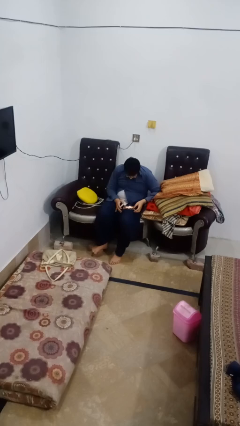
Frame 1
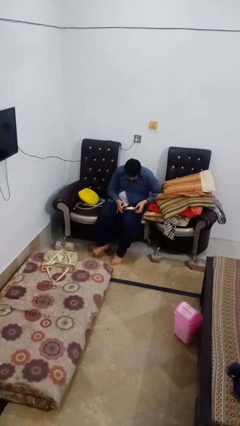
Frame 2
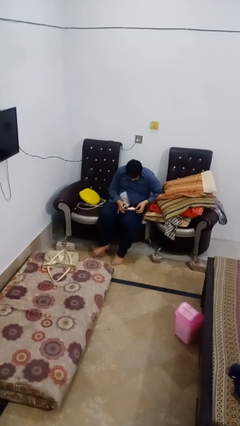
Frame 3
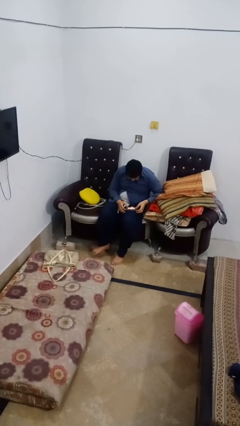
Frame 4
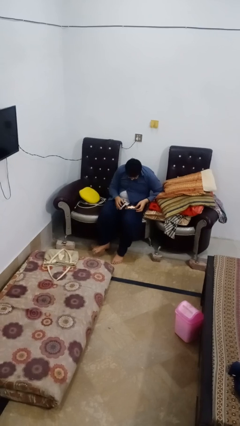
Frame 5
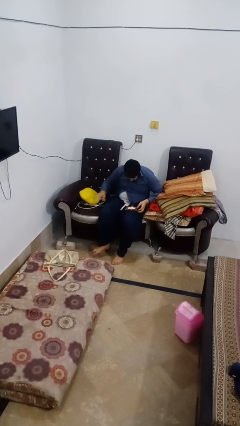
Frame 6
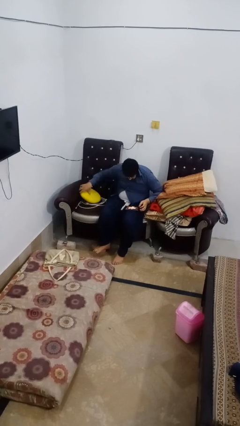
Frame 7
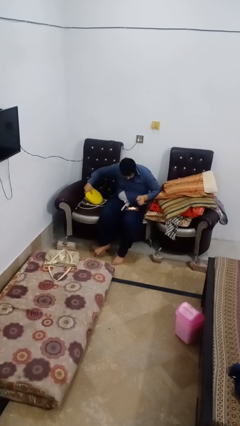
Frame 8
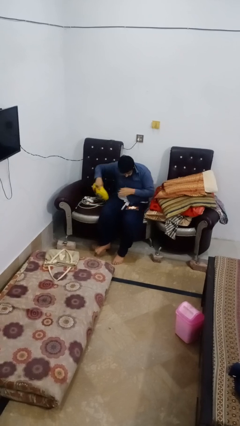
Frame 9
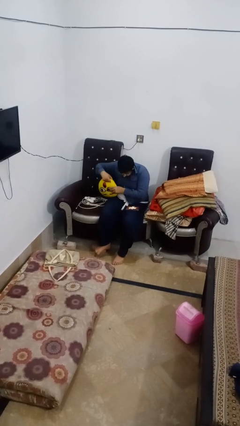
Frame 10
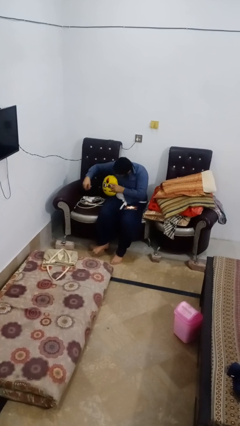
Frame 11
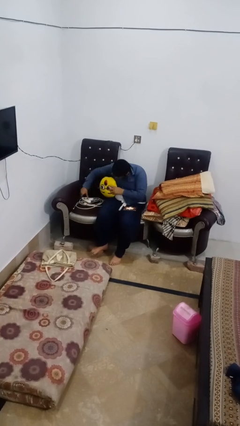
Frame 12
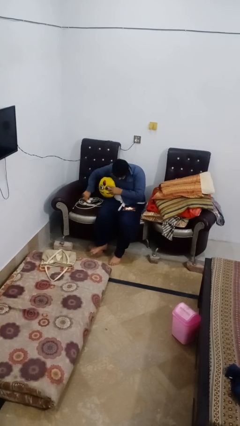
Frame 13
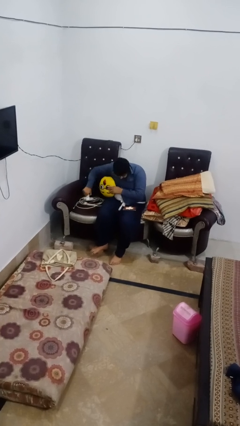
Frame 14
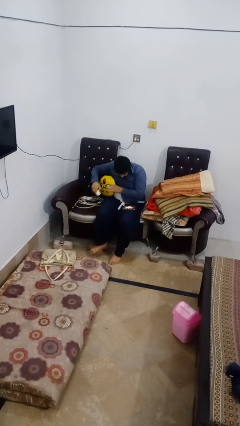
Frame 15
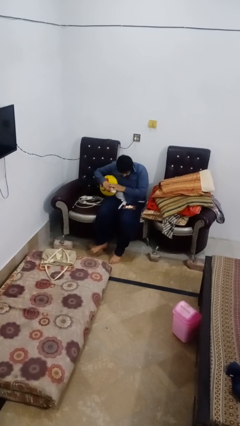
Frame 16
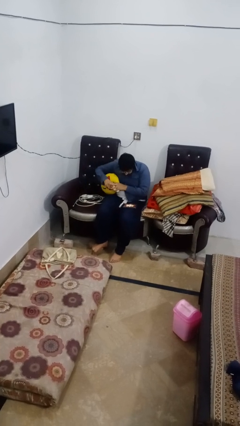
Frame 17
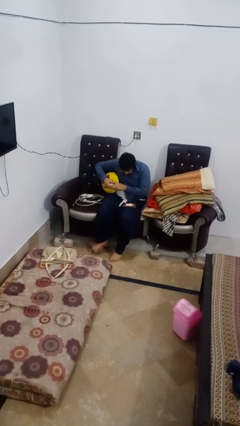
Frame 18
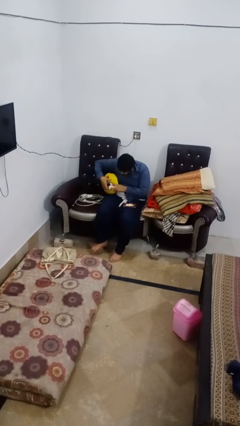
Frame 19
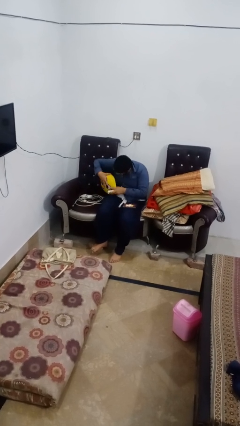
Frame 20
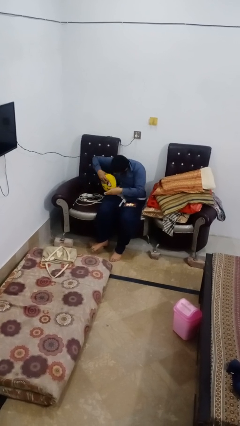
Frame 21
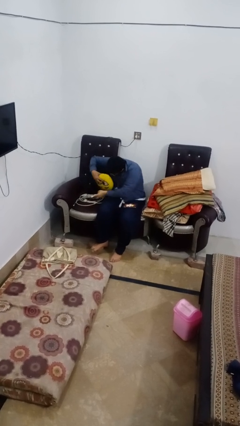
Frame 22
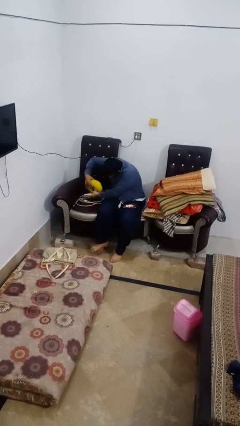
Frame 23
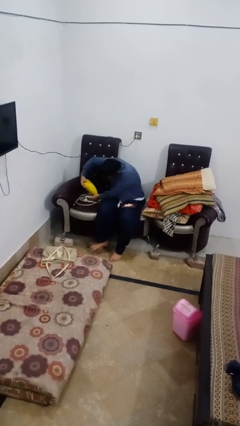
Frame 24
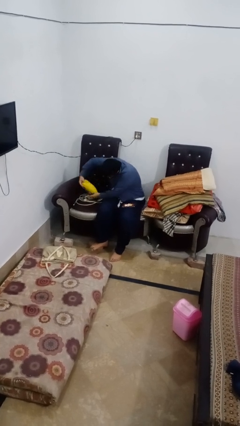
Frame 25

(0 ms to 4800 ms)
person searches in couch

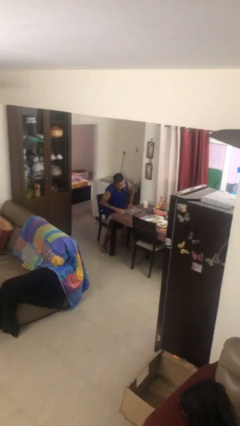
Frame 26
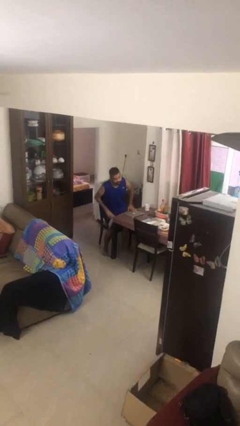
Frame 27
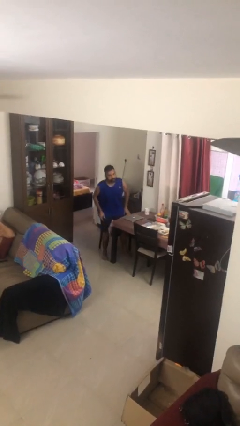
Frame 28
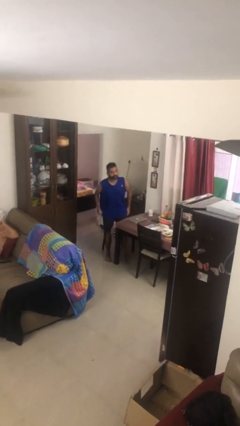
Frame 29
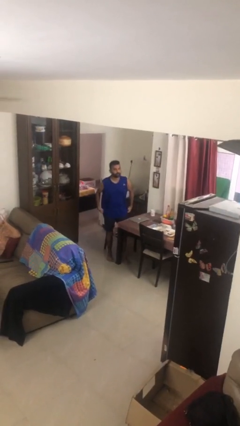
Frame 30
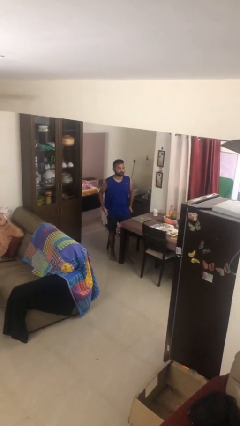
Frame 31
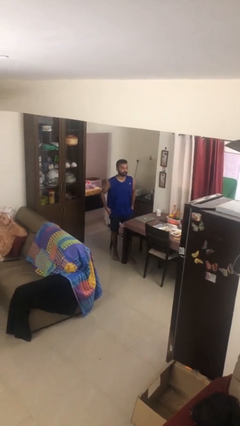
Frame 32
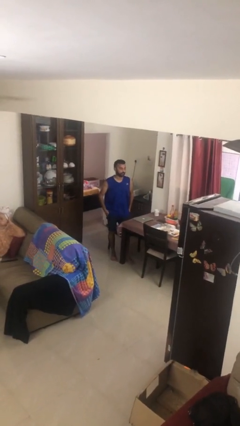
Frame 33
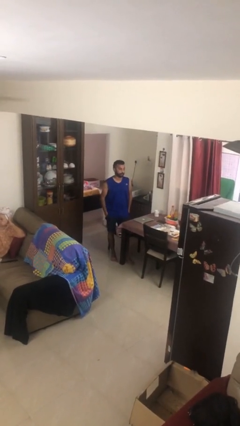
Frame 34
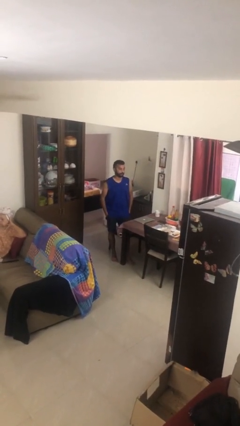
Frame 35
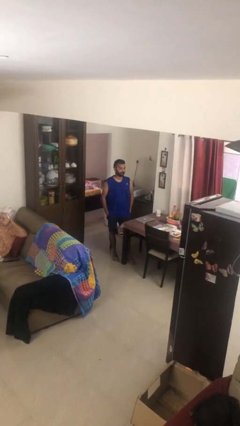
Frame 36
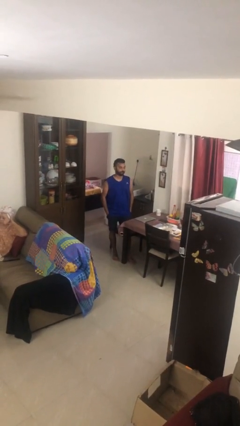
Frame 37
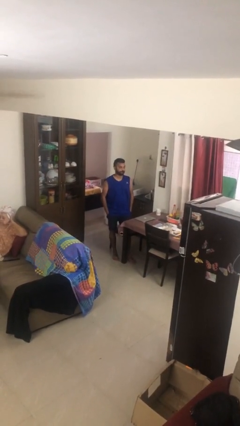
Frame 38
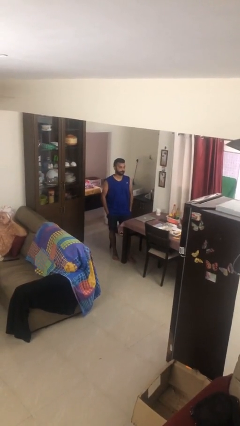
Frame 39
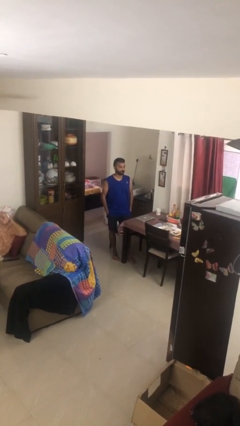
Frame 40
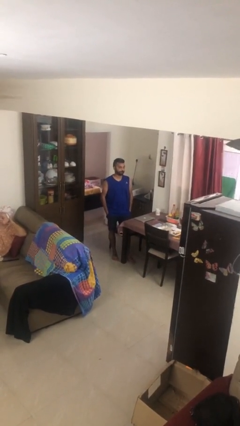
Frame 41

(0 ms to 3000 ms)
person stands up

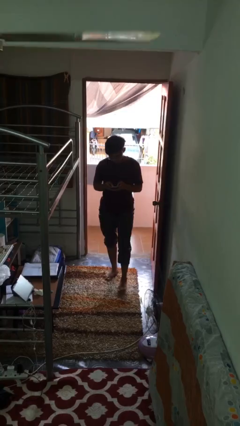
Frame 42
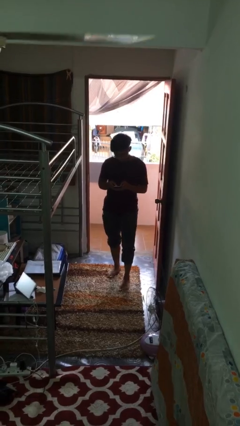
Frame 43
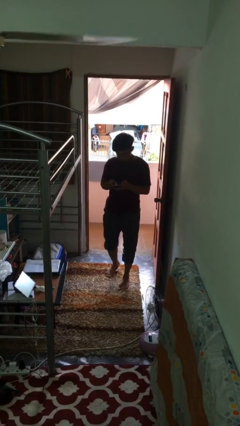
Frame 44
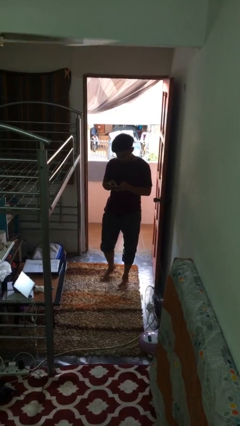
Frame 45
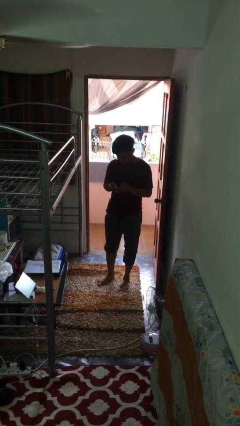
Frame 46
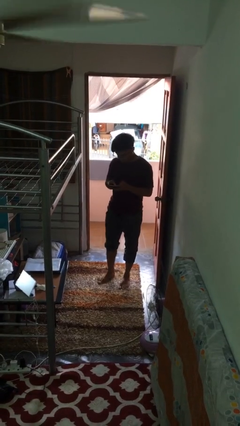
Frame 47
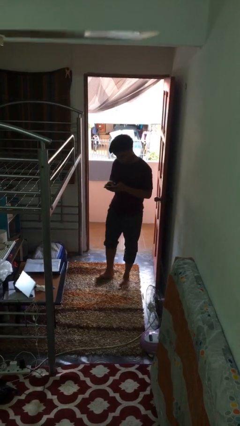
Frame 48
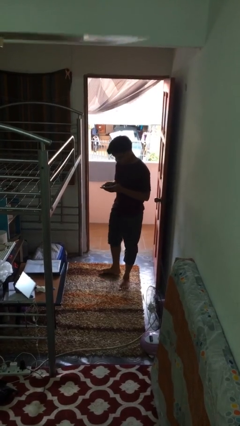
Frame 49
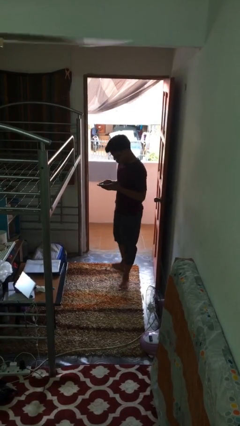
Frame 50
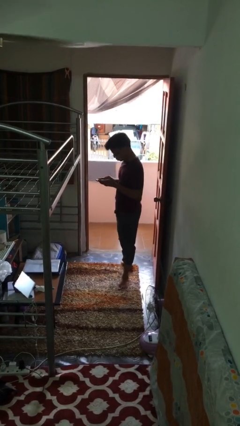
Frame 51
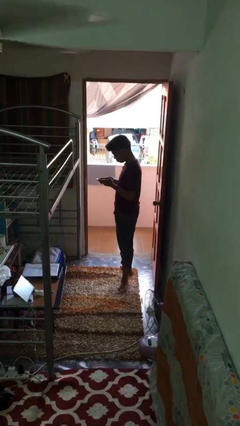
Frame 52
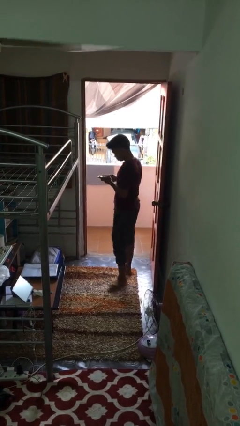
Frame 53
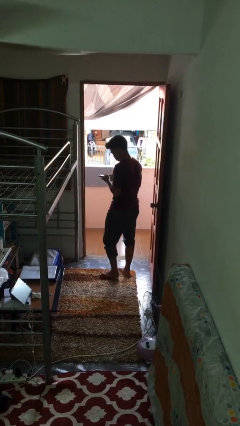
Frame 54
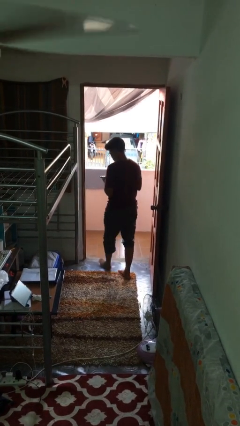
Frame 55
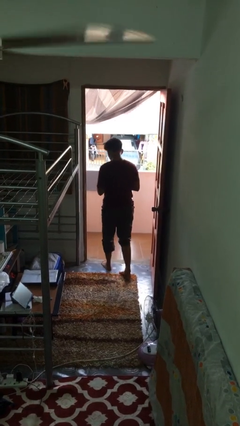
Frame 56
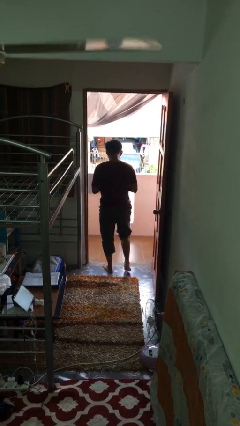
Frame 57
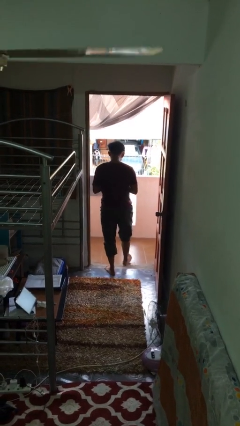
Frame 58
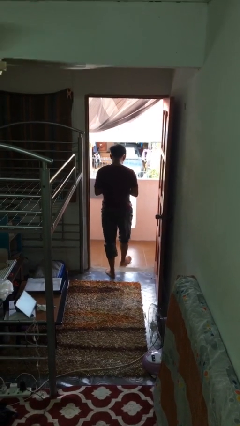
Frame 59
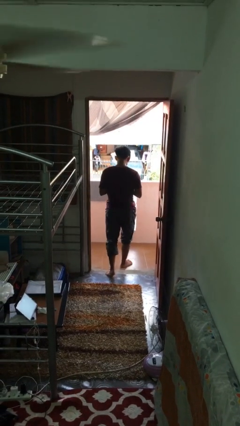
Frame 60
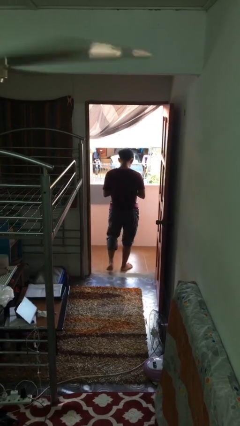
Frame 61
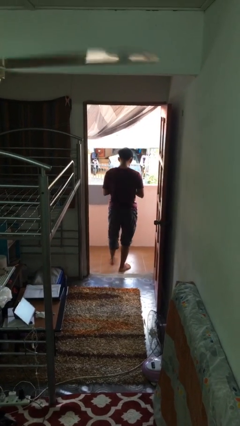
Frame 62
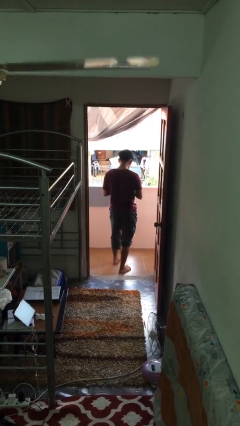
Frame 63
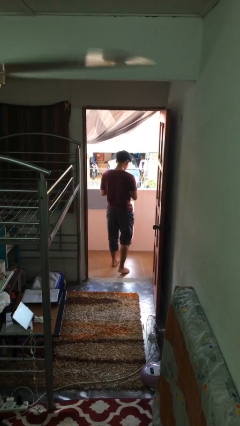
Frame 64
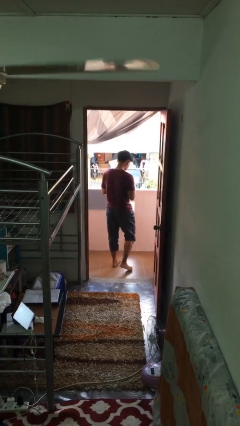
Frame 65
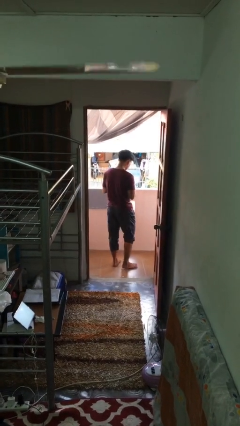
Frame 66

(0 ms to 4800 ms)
person exits scene through structure

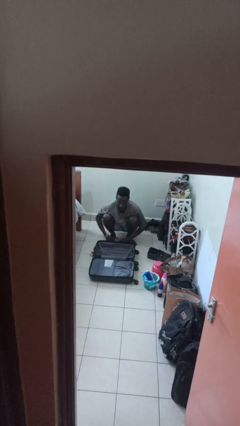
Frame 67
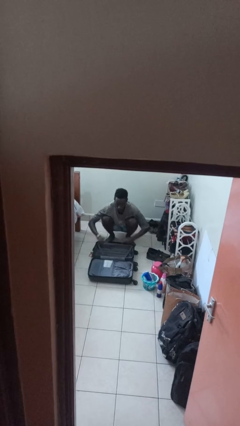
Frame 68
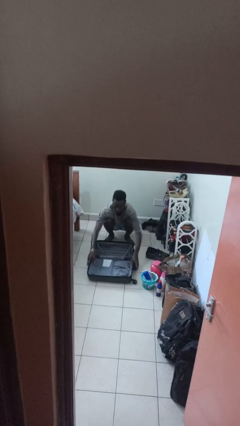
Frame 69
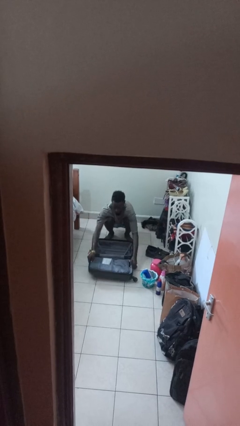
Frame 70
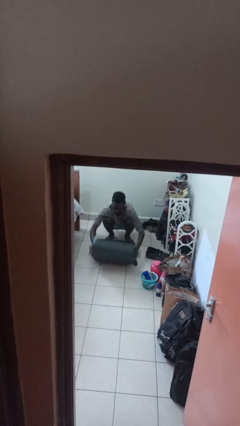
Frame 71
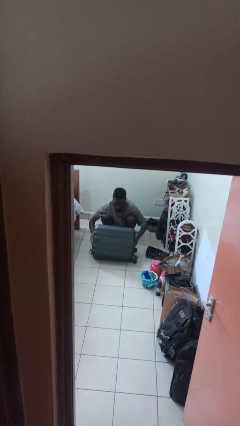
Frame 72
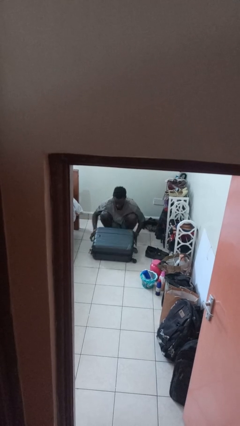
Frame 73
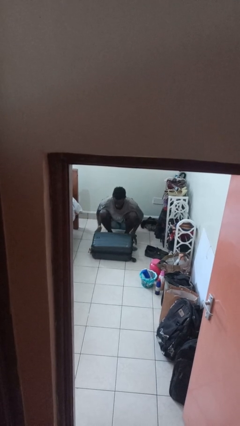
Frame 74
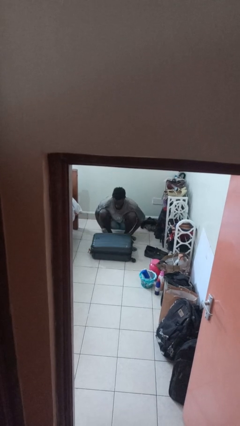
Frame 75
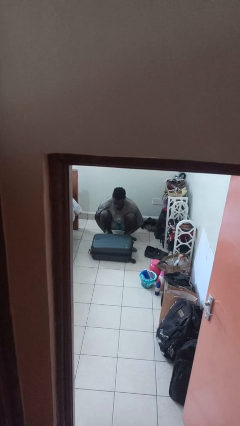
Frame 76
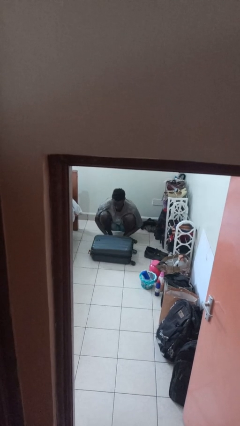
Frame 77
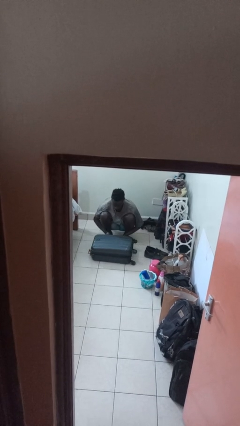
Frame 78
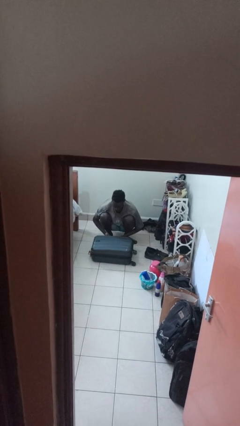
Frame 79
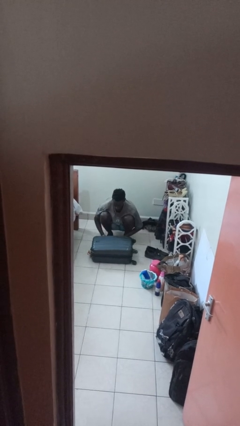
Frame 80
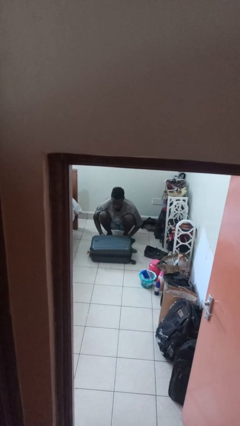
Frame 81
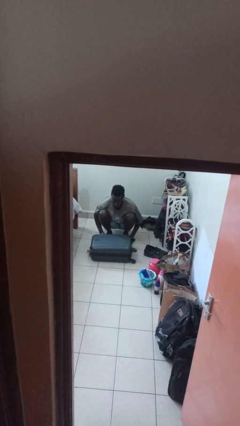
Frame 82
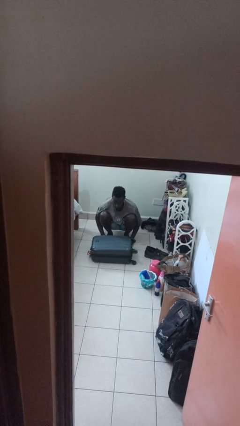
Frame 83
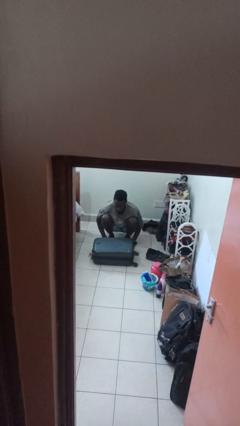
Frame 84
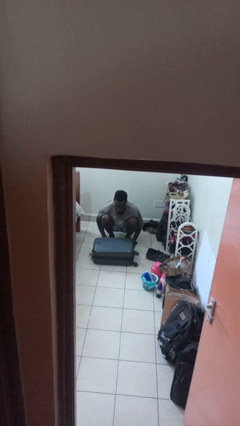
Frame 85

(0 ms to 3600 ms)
person closes suitcase

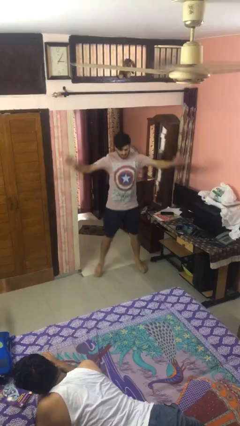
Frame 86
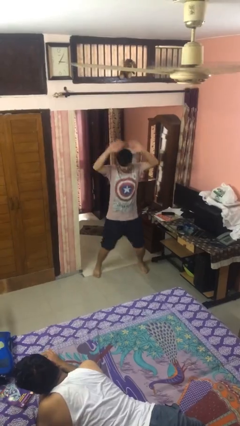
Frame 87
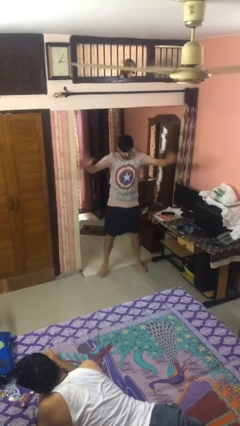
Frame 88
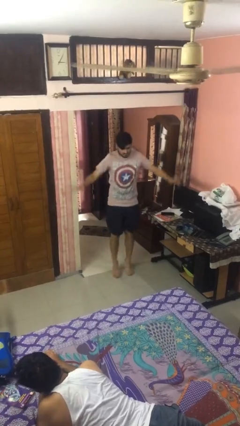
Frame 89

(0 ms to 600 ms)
person exercises with jumping jacks

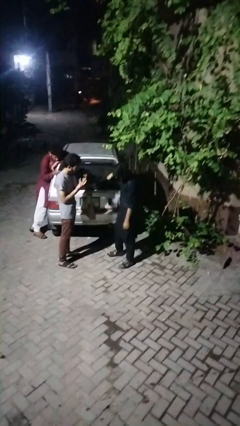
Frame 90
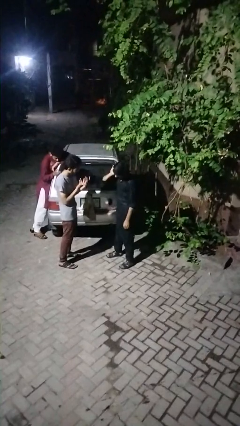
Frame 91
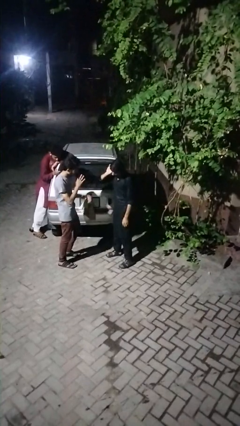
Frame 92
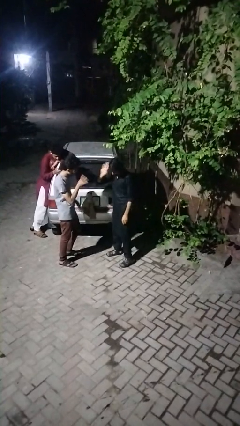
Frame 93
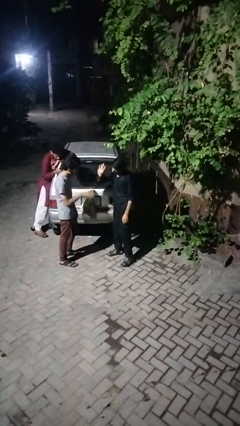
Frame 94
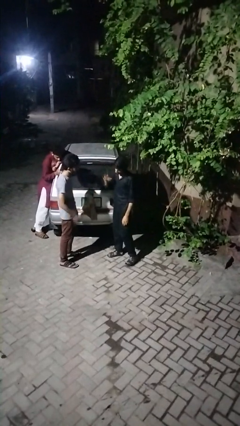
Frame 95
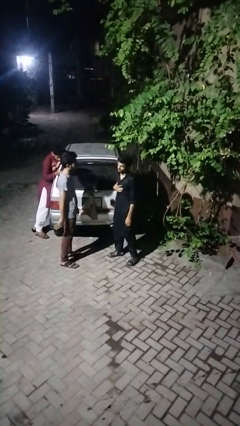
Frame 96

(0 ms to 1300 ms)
person talks to person
